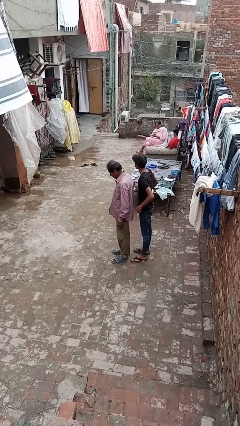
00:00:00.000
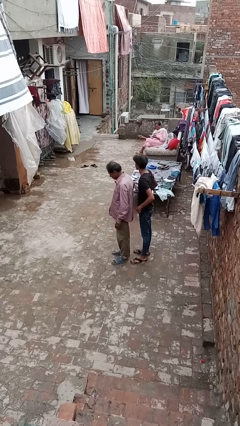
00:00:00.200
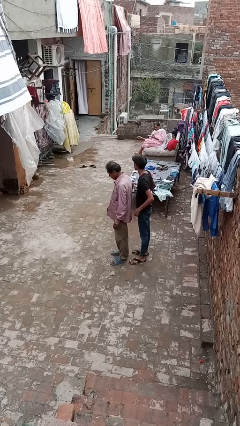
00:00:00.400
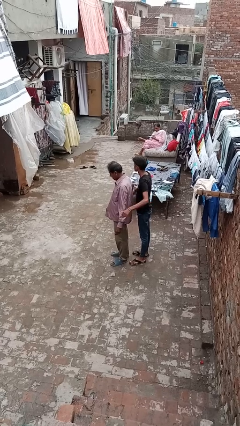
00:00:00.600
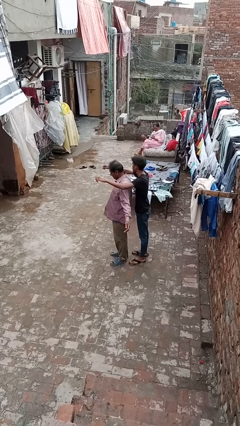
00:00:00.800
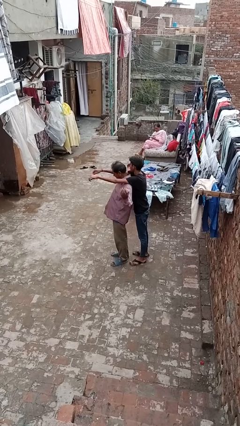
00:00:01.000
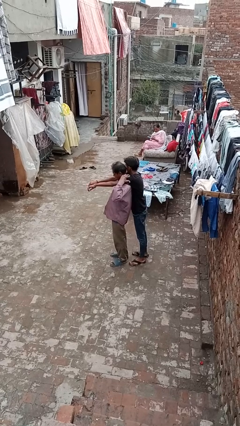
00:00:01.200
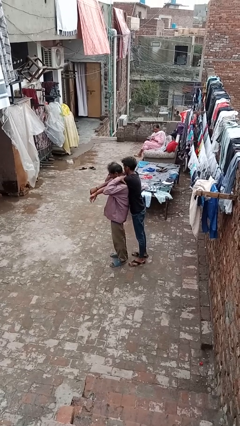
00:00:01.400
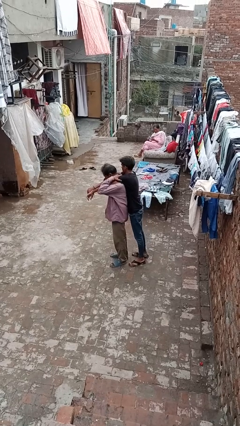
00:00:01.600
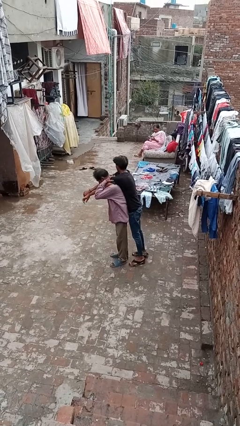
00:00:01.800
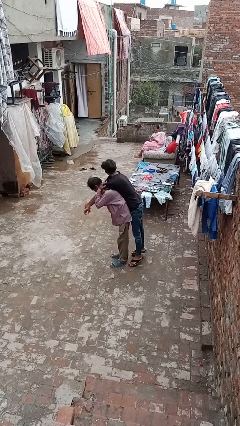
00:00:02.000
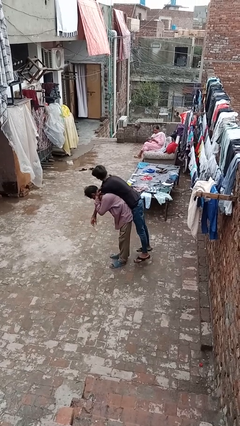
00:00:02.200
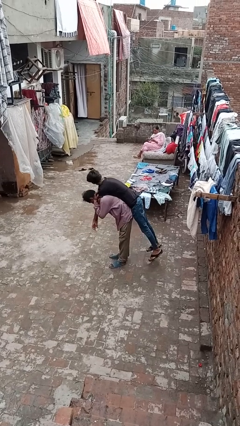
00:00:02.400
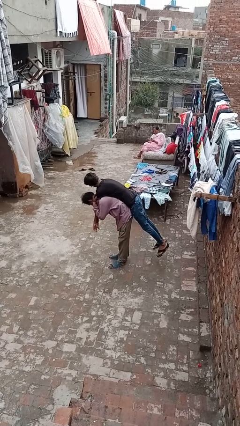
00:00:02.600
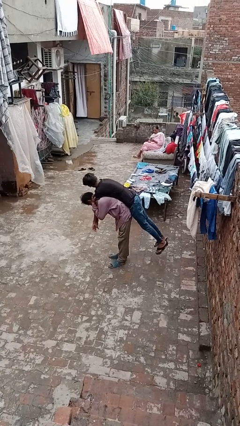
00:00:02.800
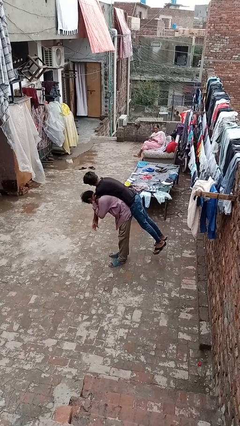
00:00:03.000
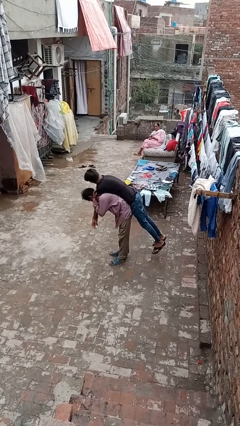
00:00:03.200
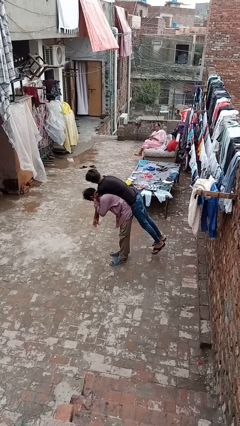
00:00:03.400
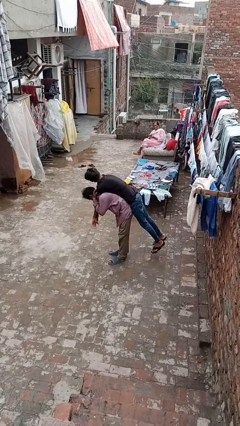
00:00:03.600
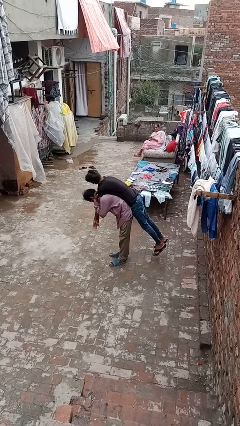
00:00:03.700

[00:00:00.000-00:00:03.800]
person carries person on shoulders

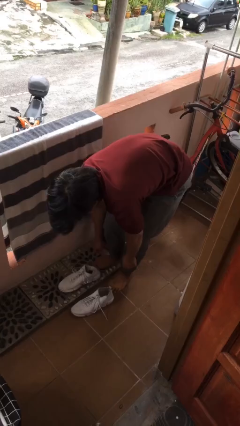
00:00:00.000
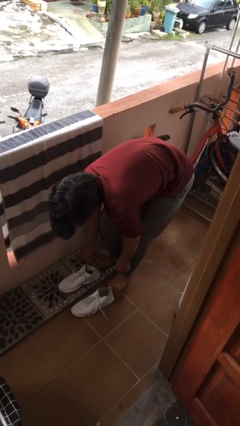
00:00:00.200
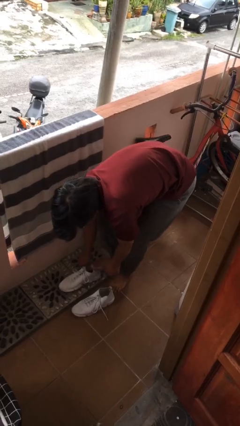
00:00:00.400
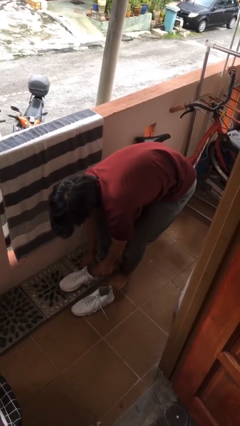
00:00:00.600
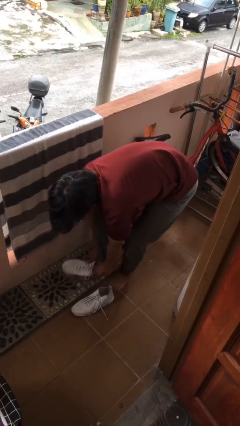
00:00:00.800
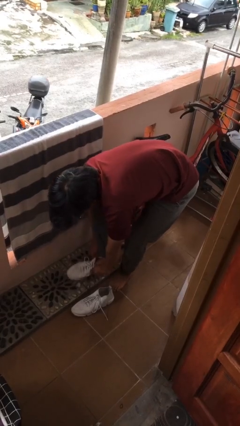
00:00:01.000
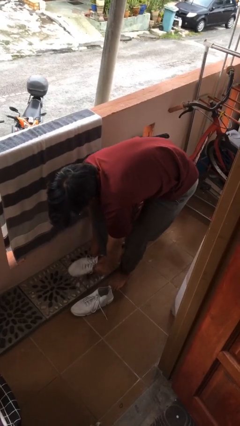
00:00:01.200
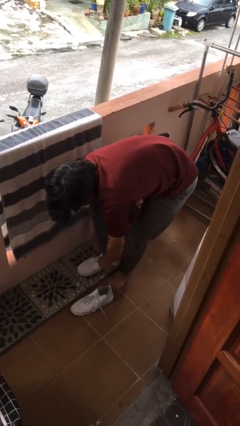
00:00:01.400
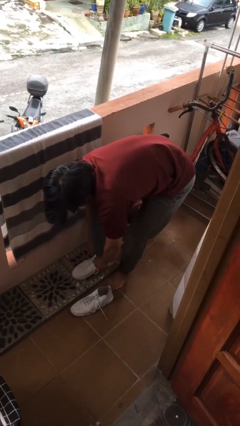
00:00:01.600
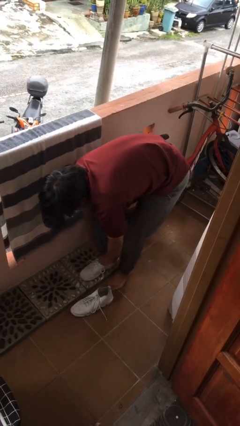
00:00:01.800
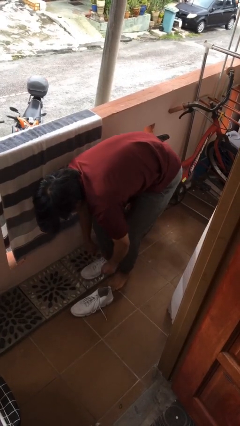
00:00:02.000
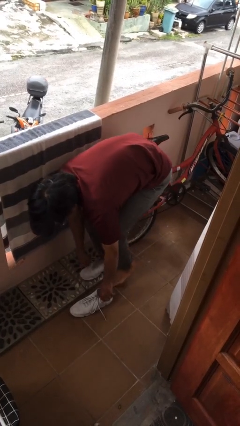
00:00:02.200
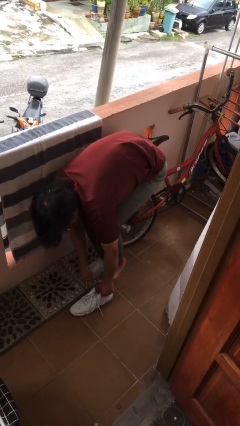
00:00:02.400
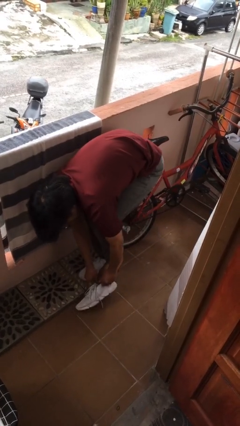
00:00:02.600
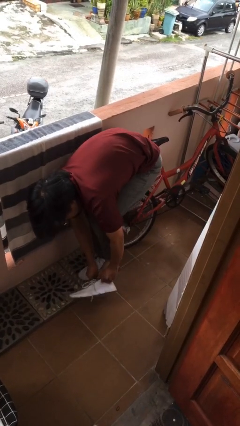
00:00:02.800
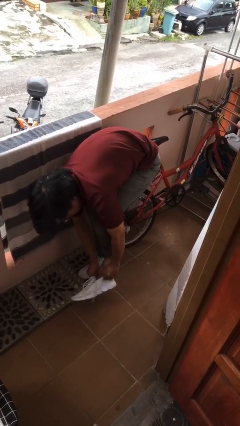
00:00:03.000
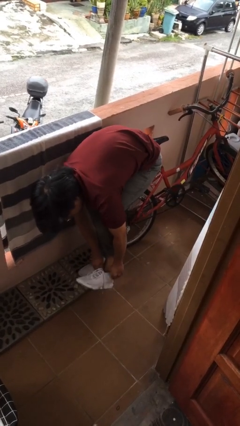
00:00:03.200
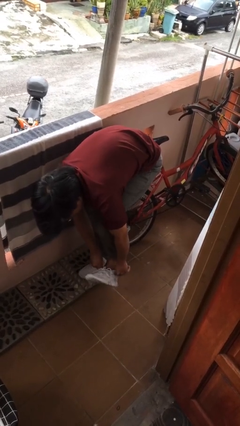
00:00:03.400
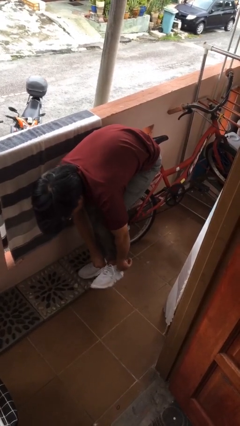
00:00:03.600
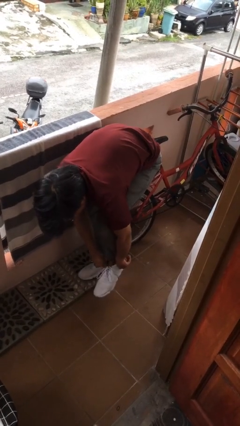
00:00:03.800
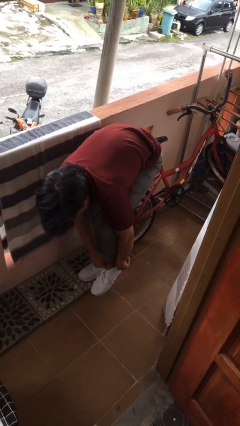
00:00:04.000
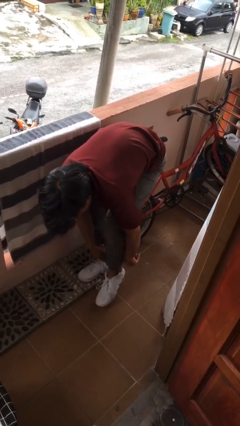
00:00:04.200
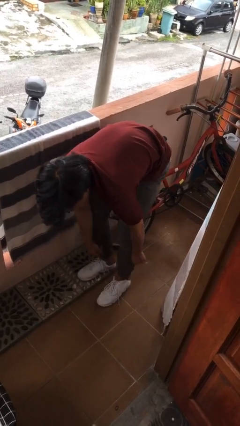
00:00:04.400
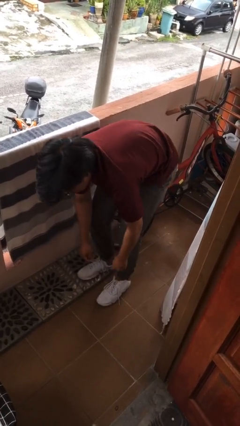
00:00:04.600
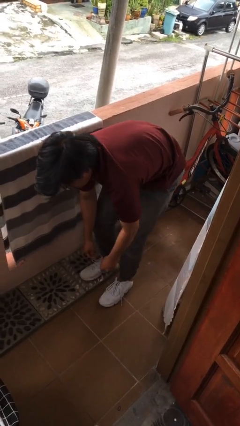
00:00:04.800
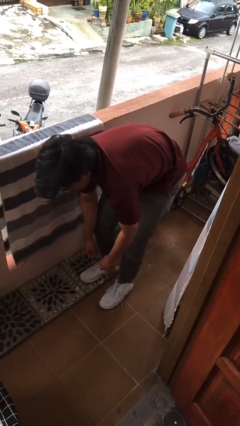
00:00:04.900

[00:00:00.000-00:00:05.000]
person puts on shoes

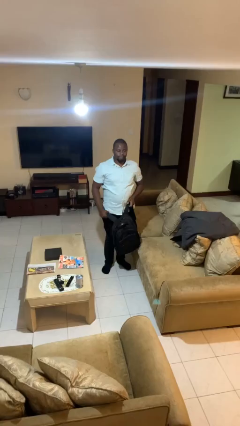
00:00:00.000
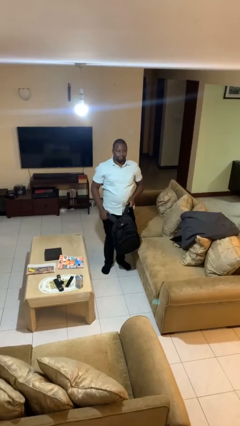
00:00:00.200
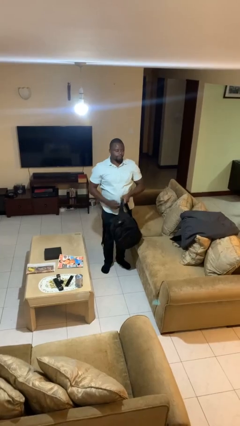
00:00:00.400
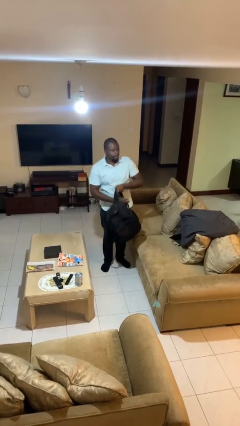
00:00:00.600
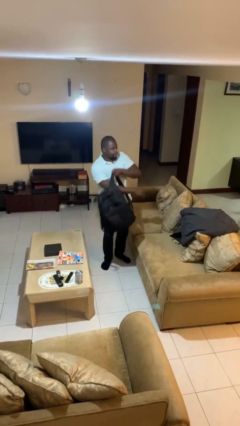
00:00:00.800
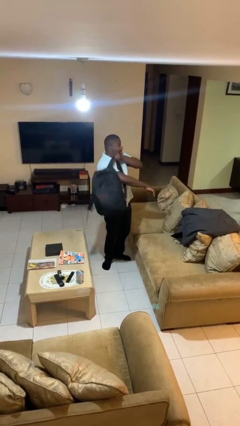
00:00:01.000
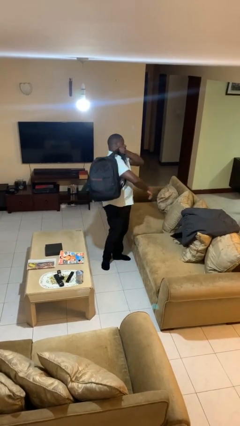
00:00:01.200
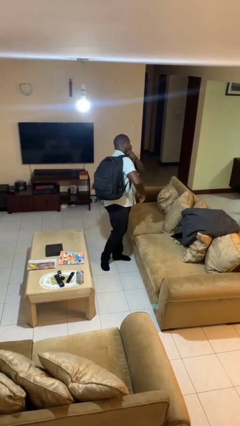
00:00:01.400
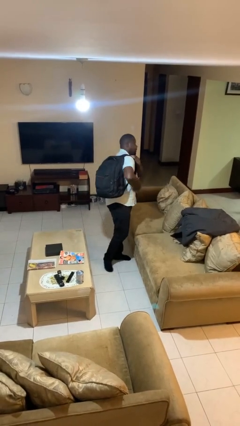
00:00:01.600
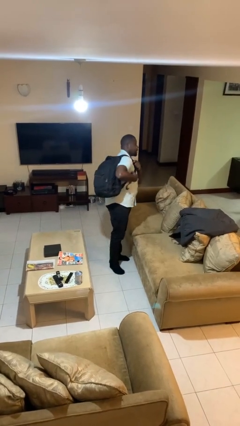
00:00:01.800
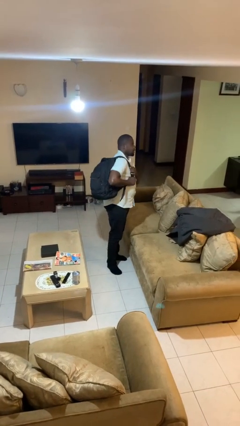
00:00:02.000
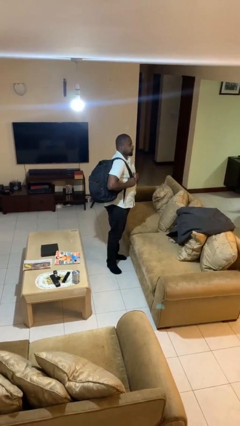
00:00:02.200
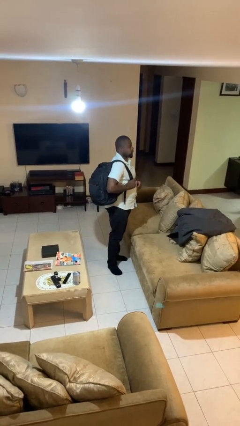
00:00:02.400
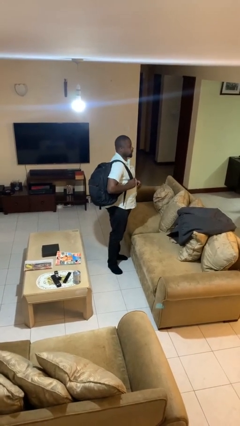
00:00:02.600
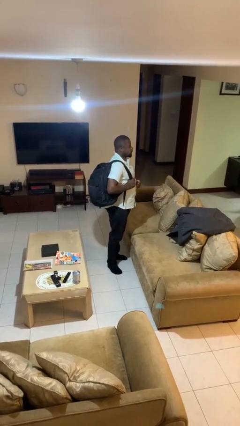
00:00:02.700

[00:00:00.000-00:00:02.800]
person puts on backpack

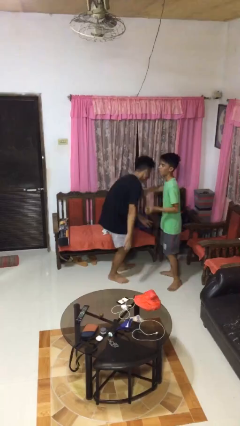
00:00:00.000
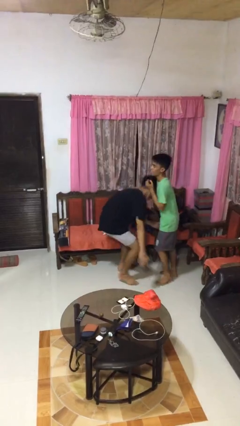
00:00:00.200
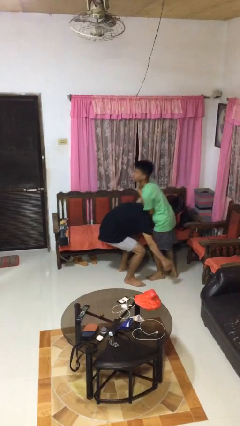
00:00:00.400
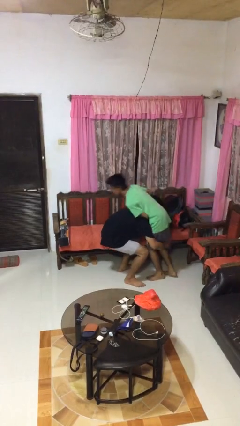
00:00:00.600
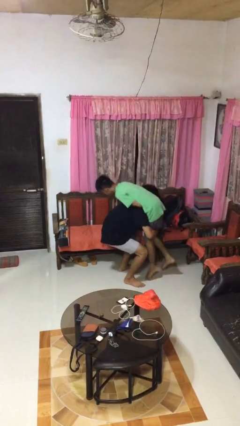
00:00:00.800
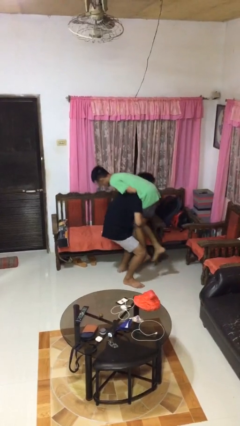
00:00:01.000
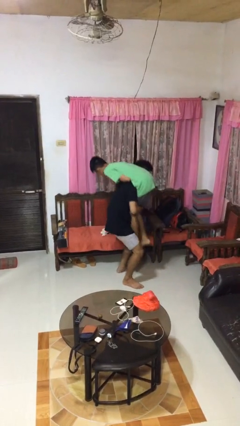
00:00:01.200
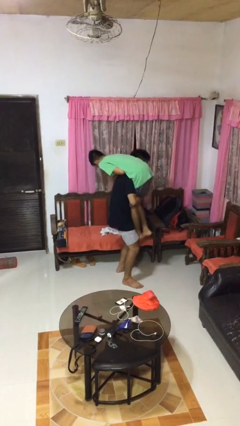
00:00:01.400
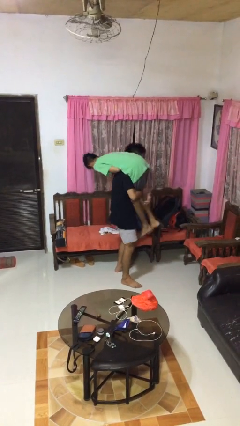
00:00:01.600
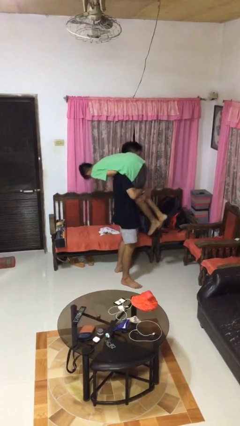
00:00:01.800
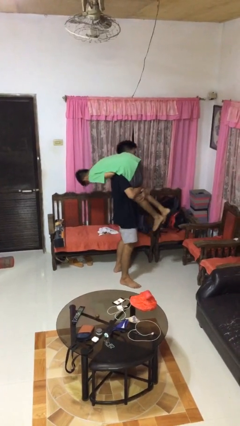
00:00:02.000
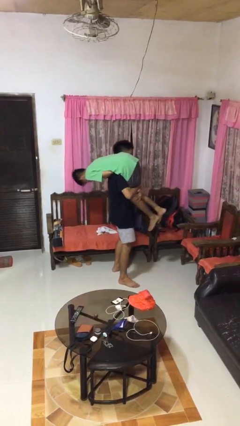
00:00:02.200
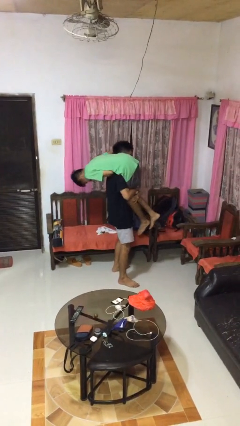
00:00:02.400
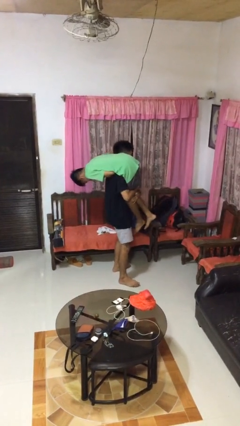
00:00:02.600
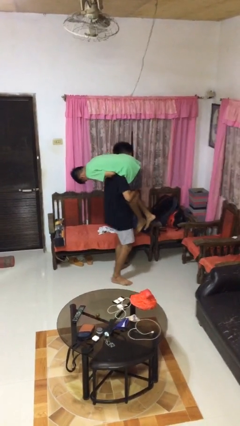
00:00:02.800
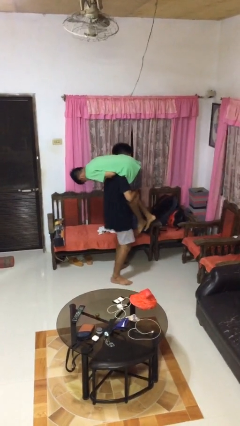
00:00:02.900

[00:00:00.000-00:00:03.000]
person carries person over shoulder

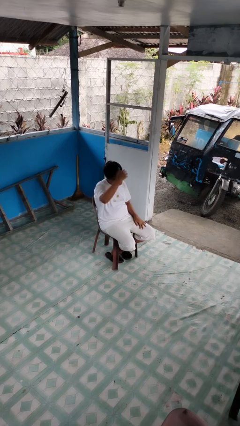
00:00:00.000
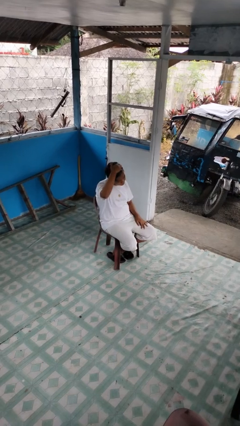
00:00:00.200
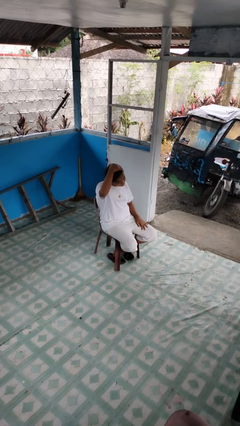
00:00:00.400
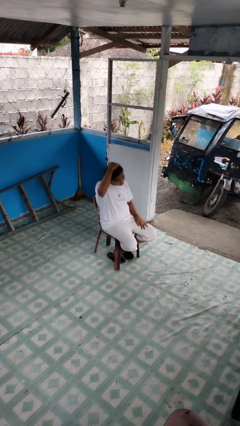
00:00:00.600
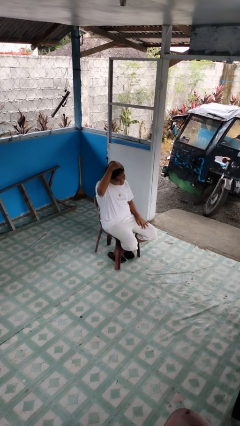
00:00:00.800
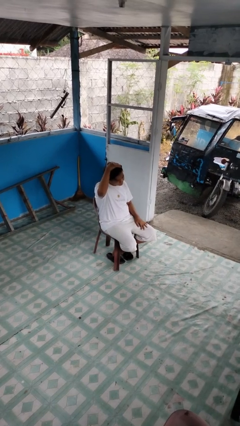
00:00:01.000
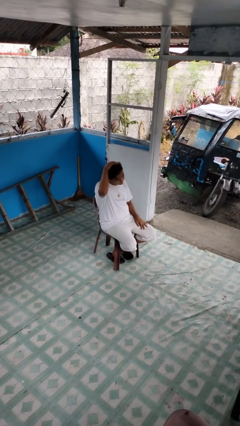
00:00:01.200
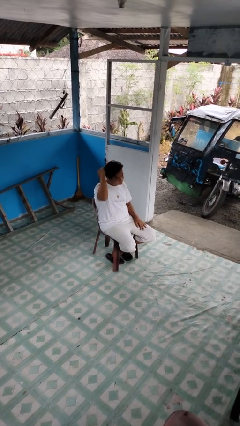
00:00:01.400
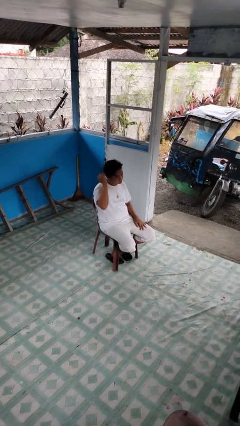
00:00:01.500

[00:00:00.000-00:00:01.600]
person pats head

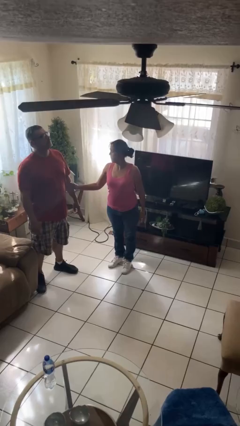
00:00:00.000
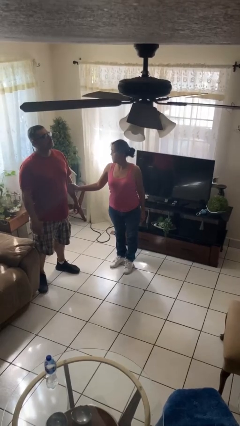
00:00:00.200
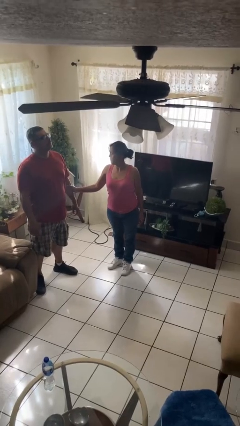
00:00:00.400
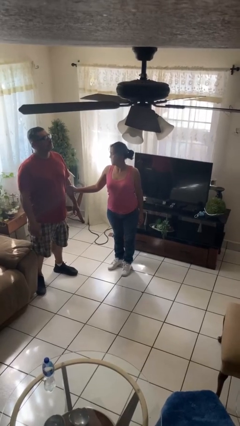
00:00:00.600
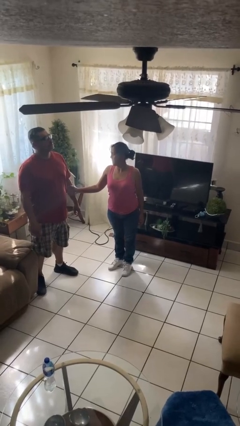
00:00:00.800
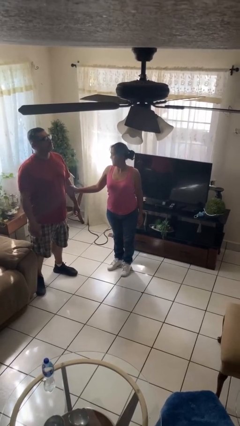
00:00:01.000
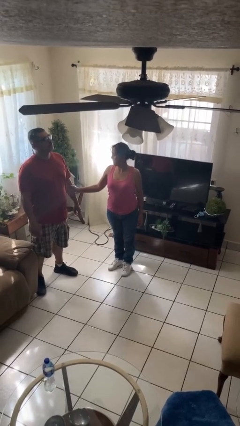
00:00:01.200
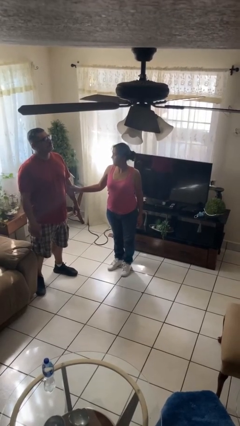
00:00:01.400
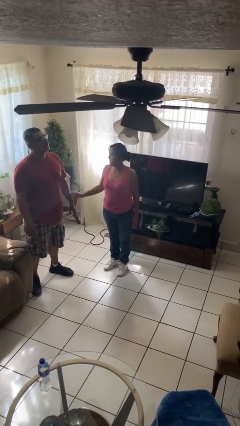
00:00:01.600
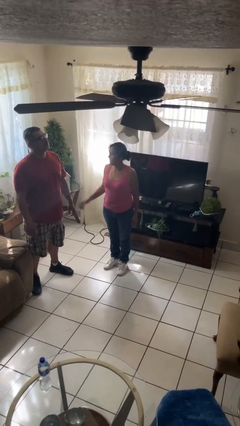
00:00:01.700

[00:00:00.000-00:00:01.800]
person grabs person by forearm
